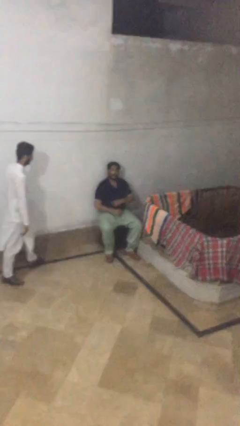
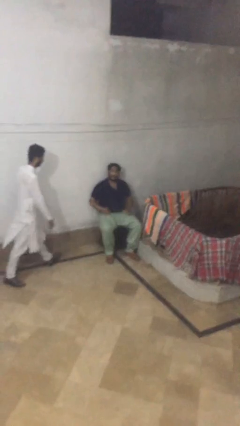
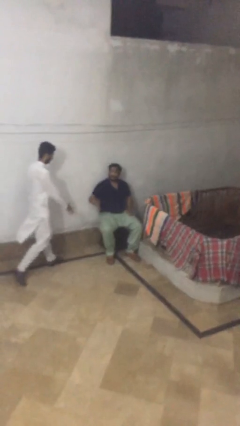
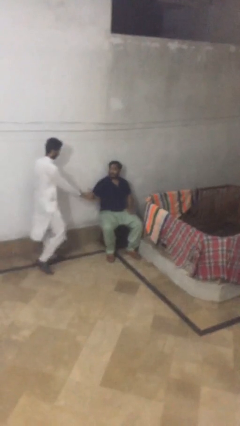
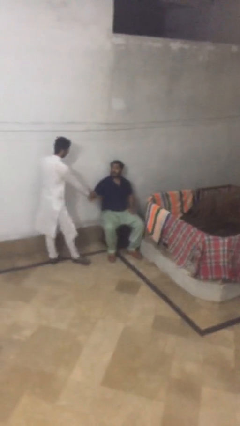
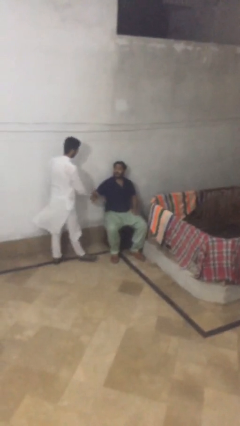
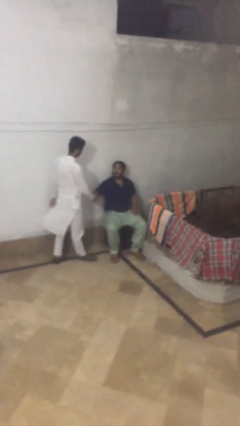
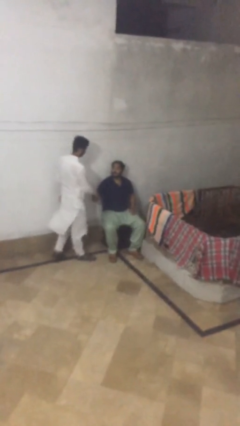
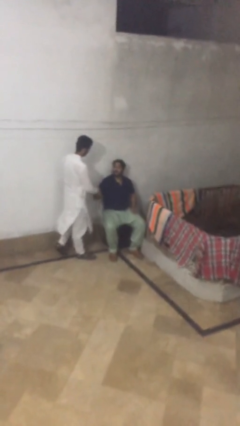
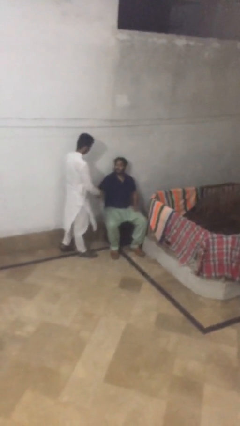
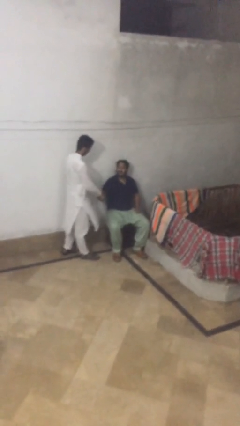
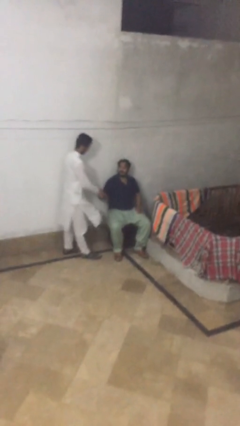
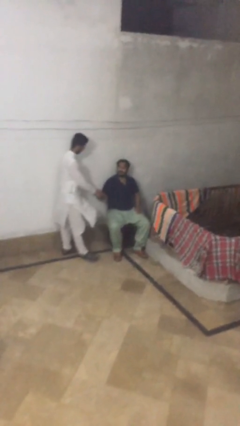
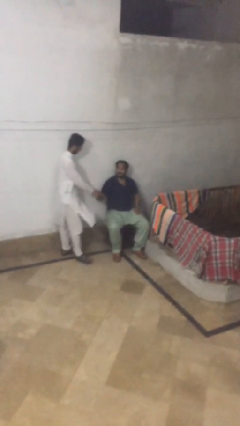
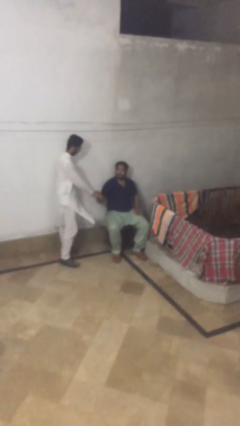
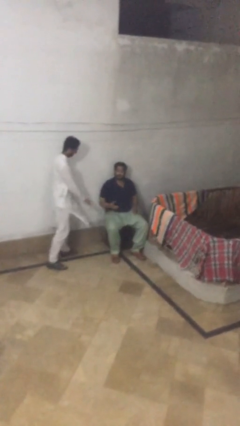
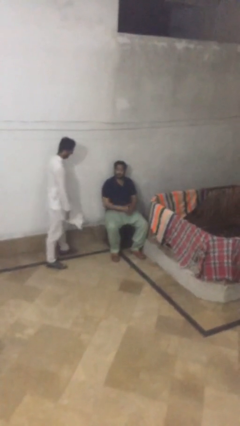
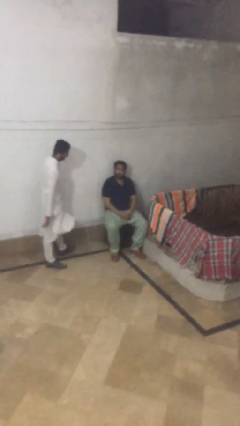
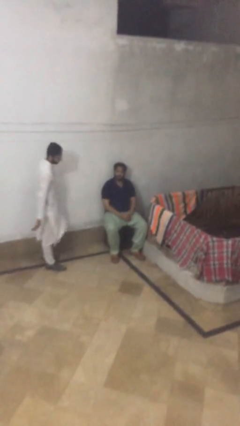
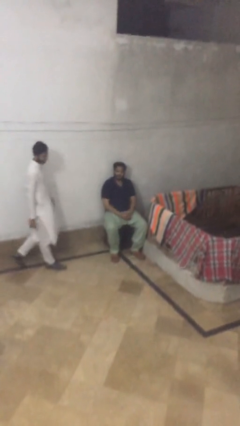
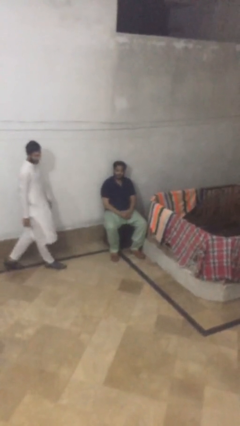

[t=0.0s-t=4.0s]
person shakes hand

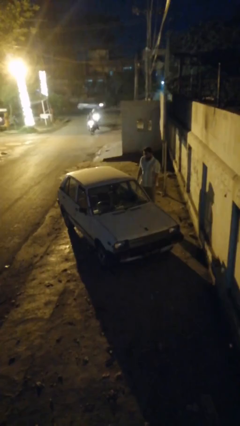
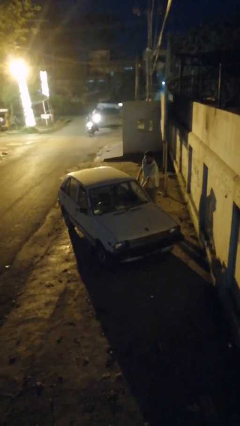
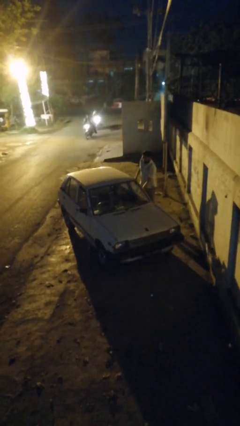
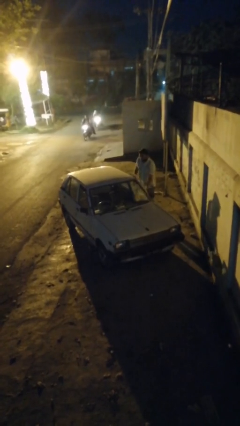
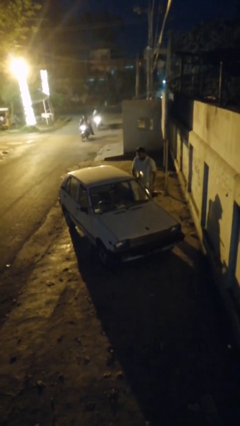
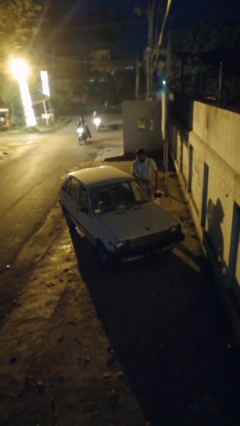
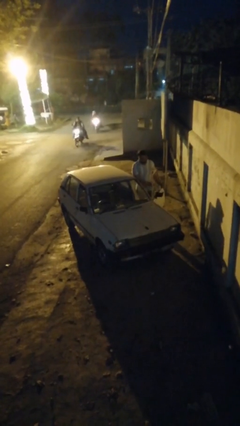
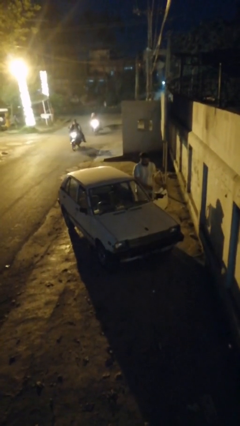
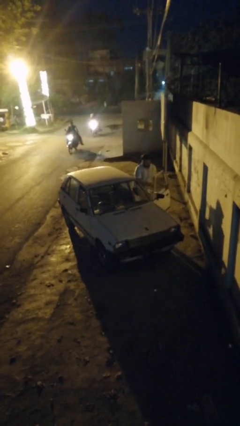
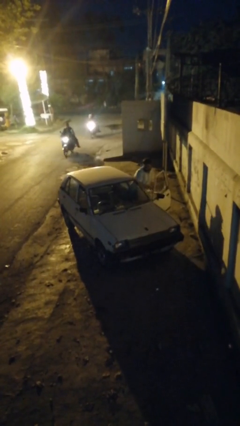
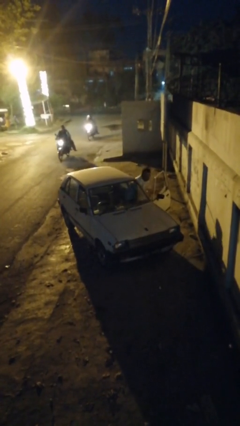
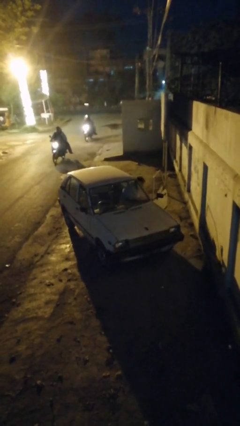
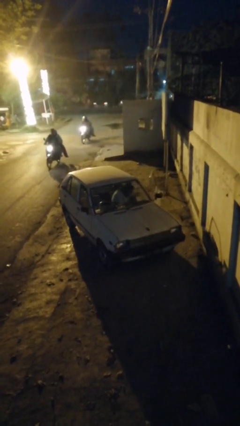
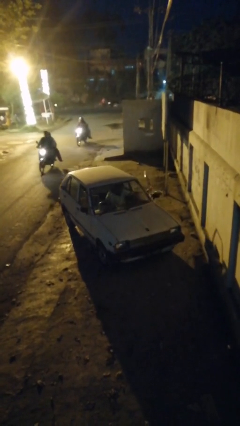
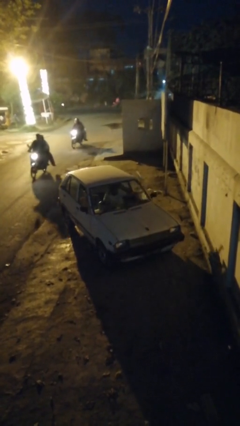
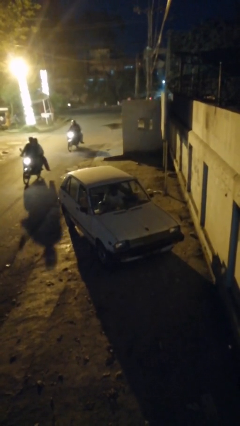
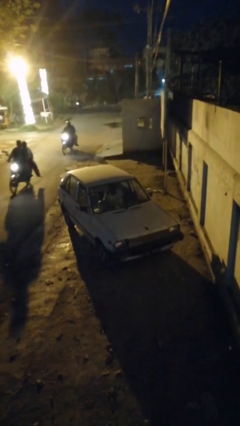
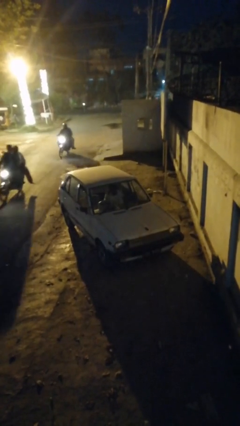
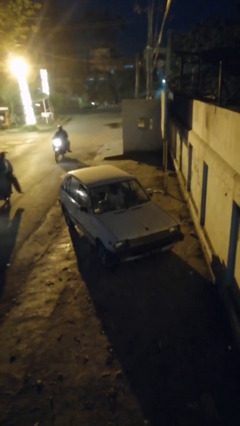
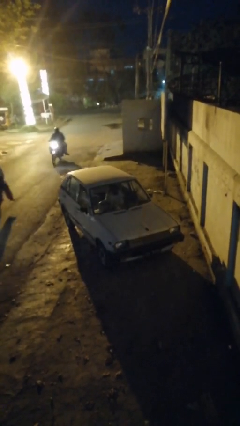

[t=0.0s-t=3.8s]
car picks up person

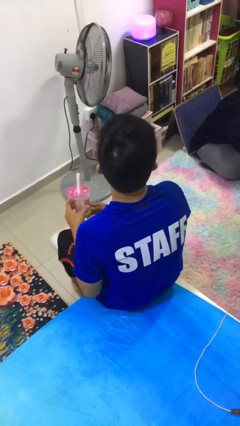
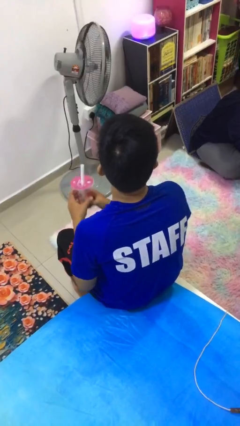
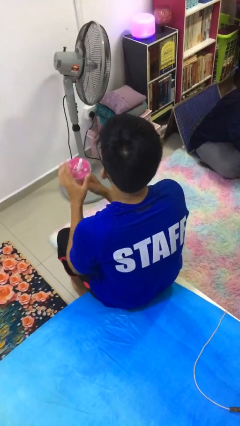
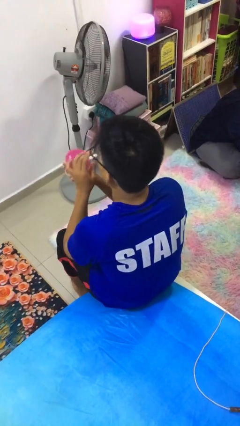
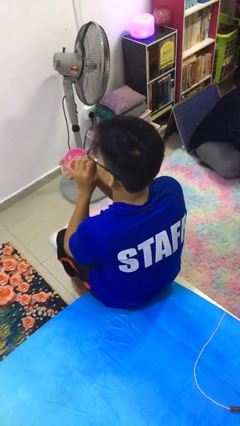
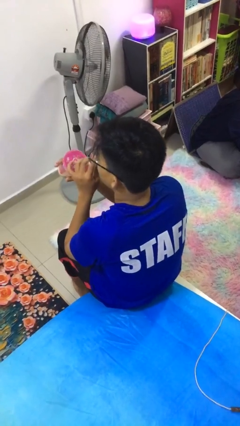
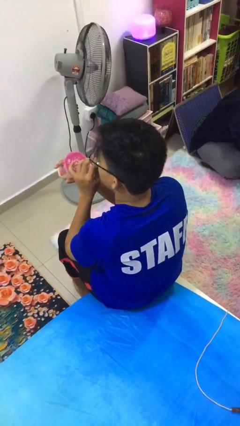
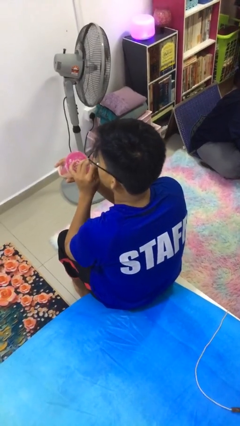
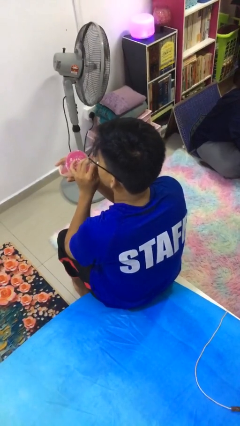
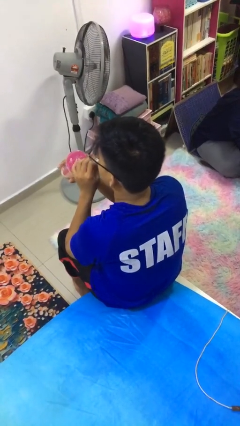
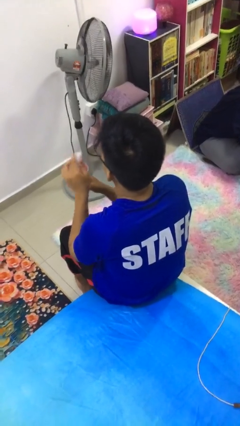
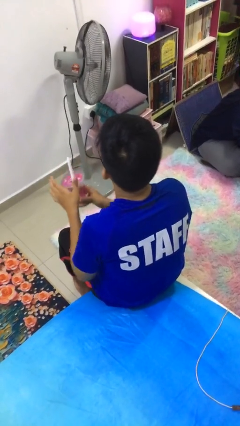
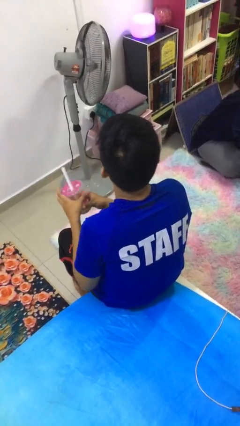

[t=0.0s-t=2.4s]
person drinks from straw

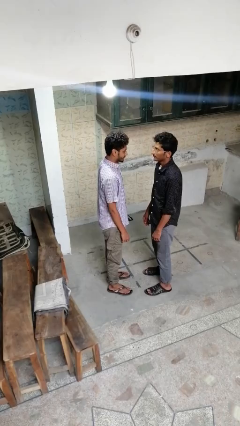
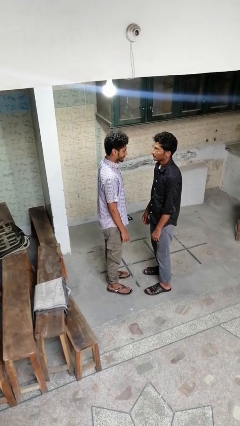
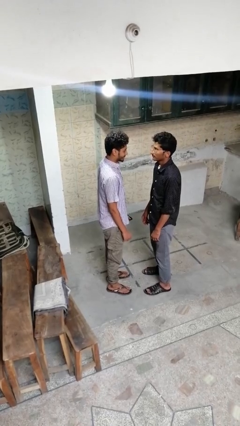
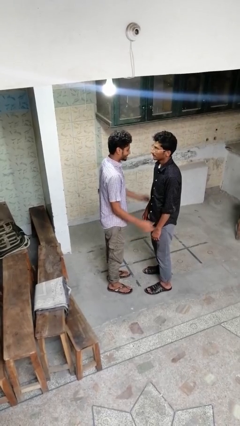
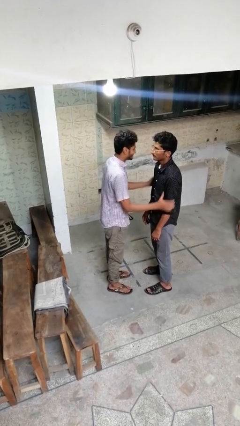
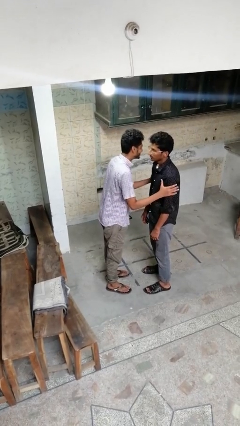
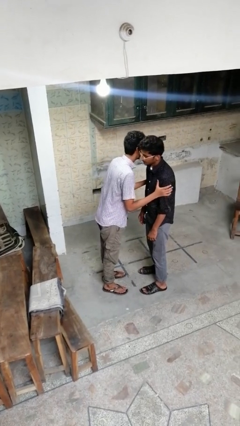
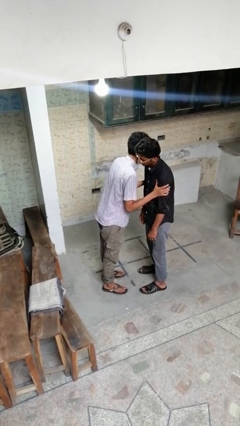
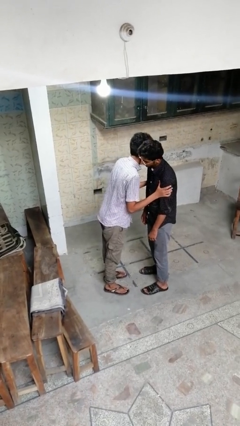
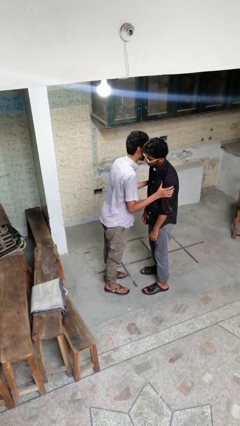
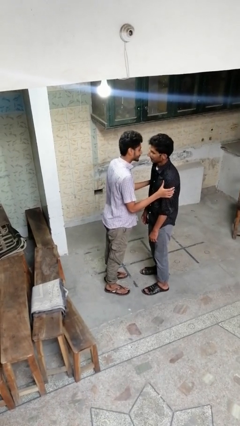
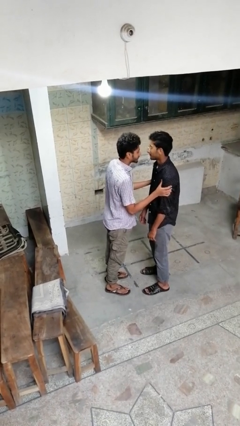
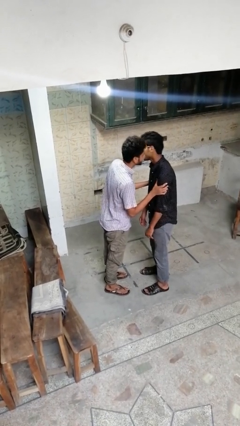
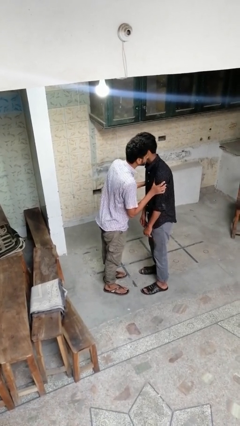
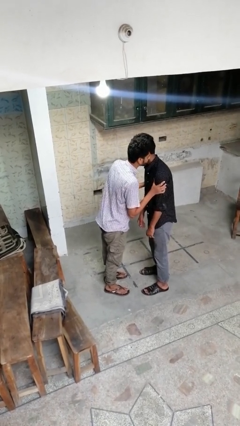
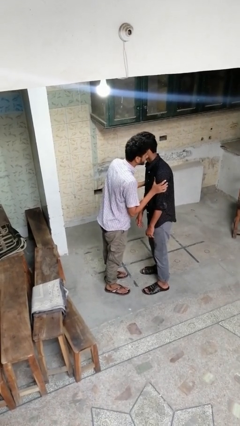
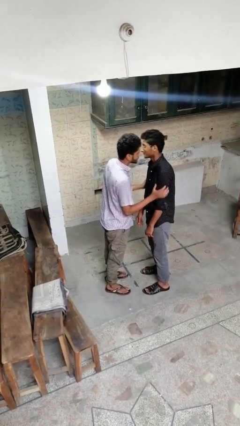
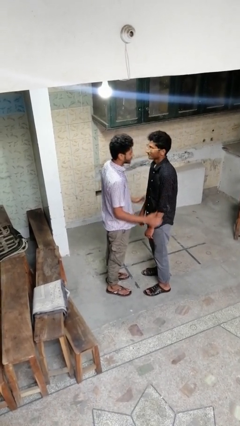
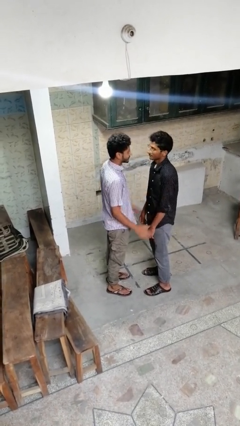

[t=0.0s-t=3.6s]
person kisses cheek of person

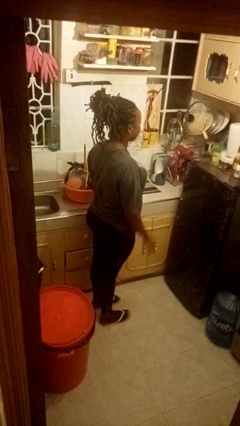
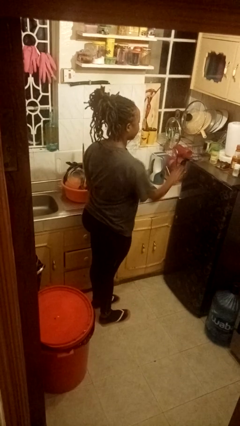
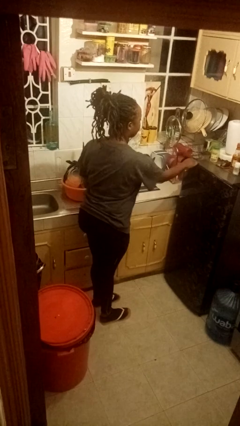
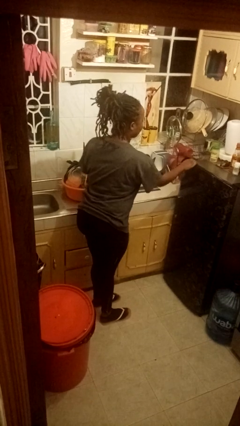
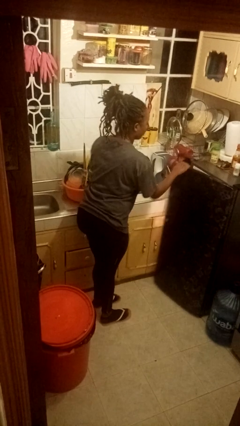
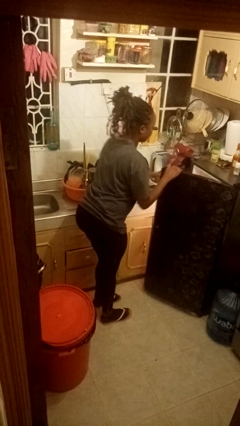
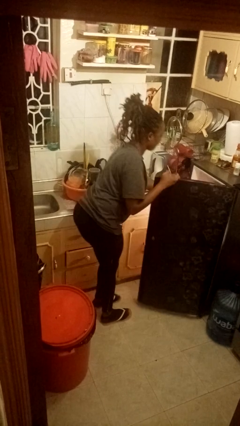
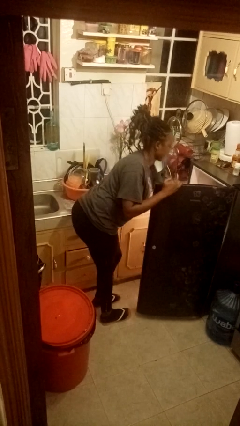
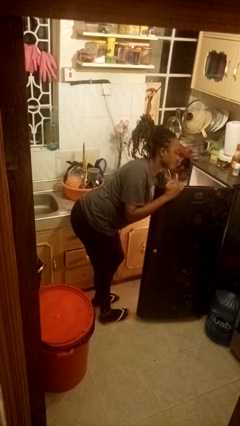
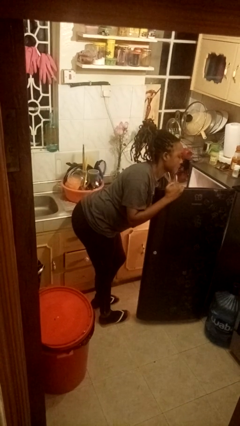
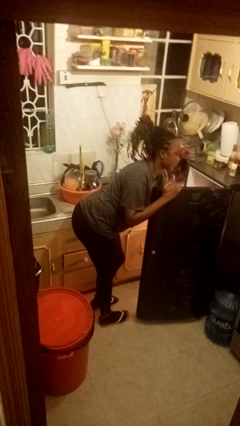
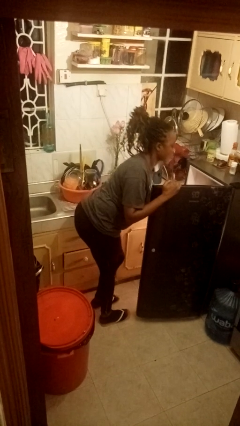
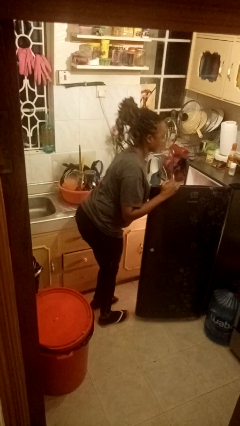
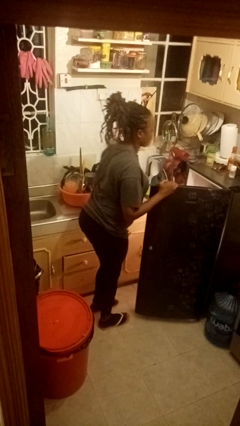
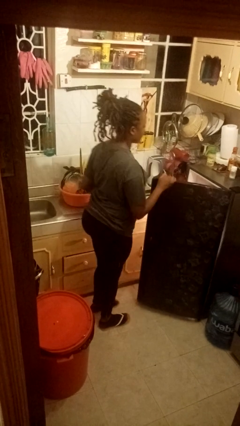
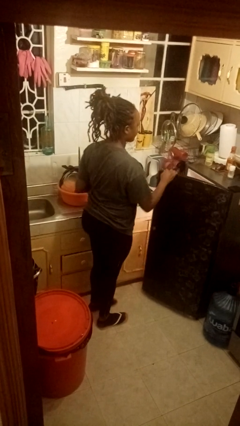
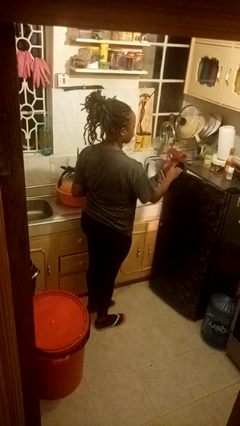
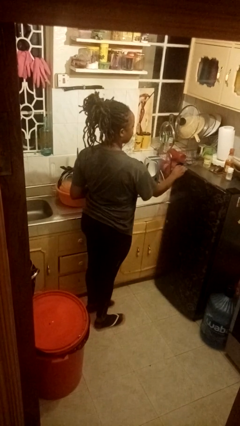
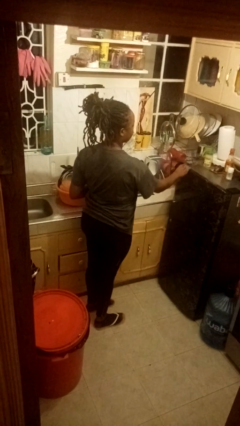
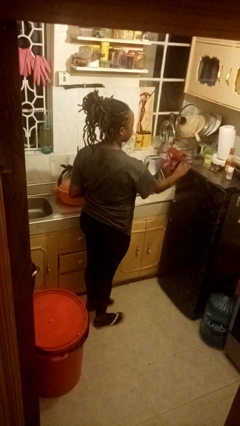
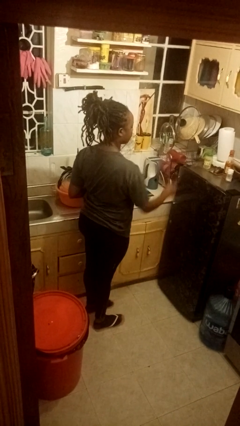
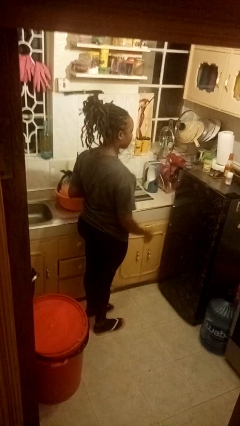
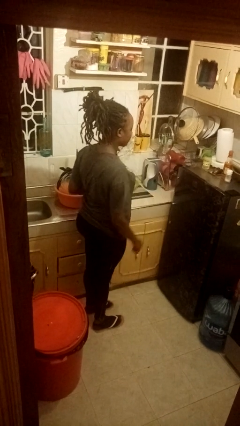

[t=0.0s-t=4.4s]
person takes object from refrigerator
